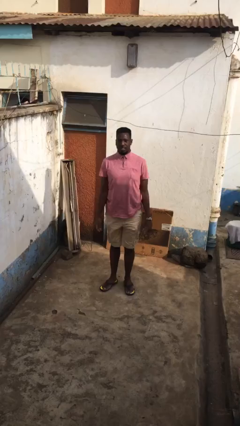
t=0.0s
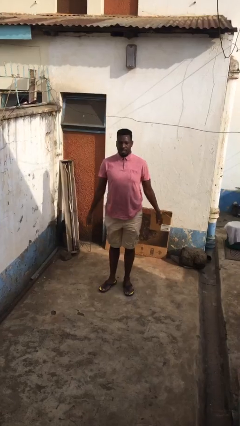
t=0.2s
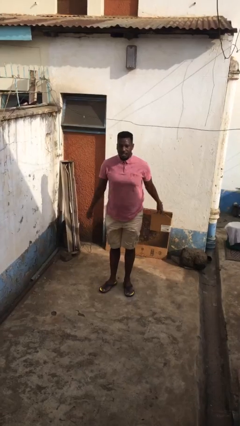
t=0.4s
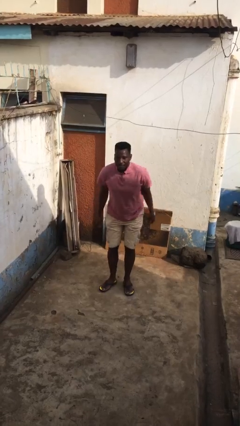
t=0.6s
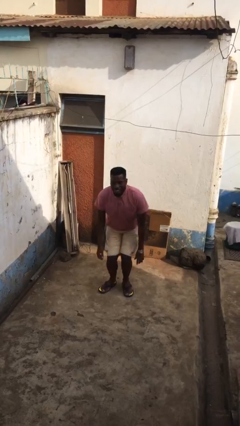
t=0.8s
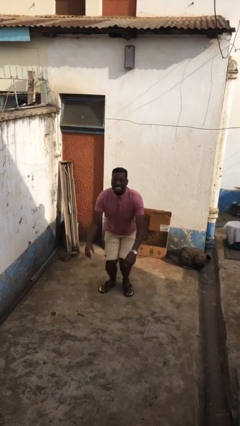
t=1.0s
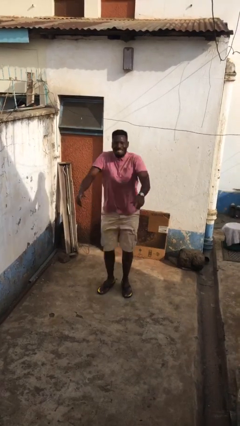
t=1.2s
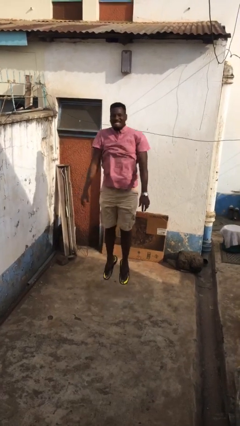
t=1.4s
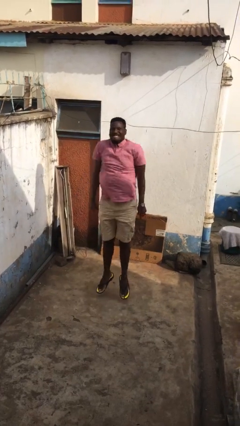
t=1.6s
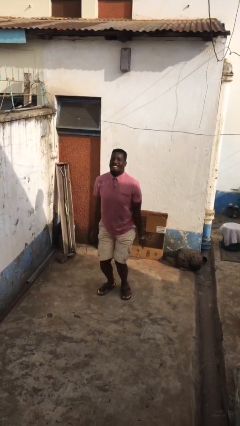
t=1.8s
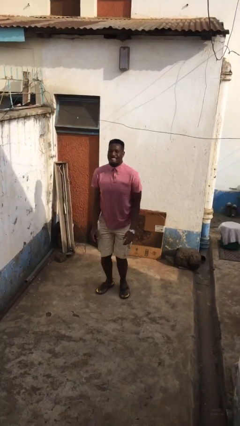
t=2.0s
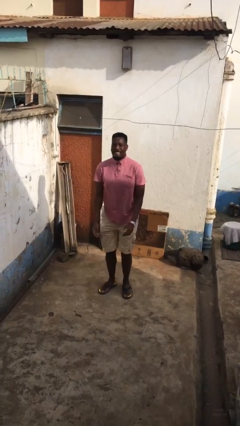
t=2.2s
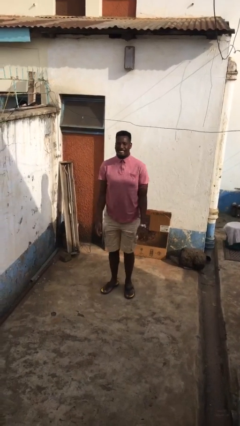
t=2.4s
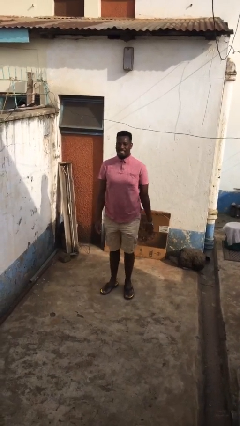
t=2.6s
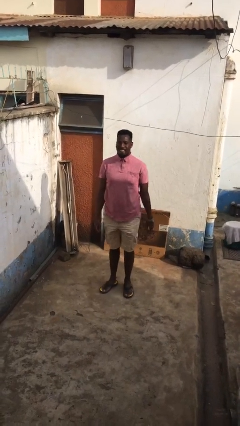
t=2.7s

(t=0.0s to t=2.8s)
person jumps

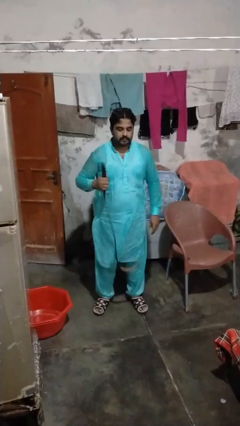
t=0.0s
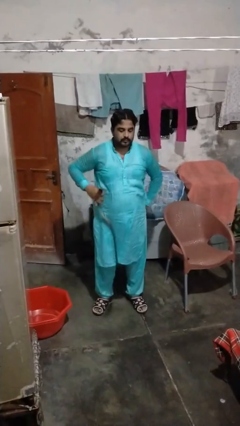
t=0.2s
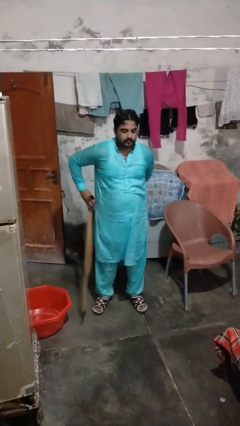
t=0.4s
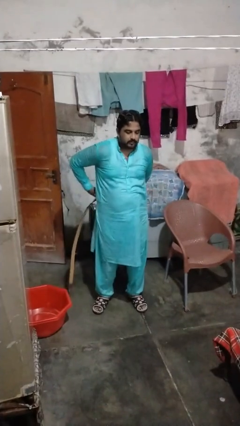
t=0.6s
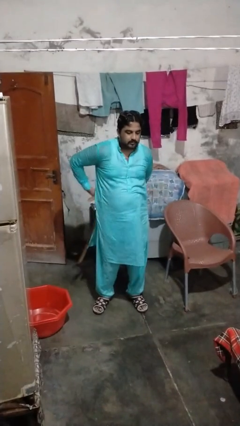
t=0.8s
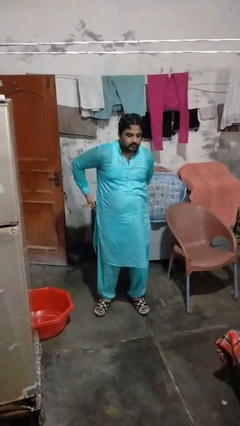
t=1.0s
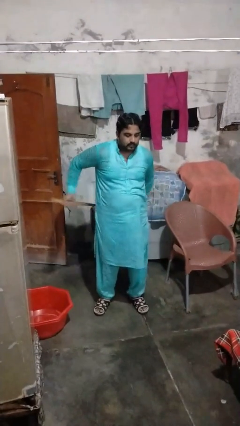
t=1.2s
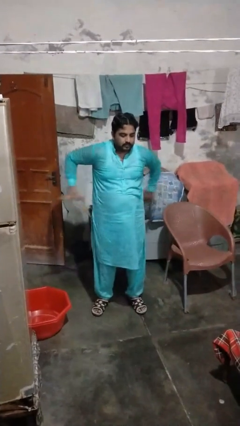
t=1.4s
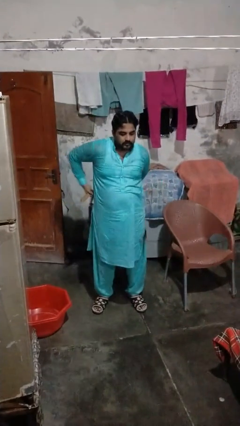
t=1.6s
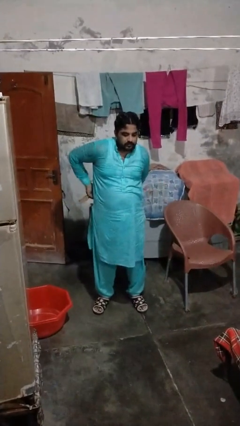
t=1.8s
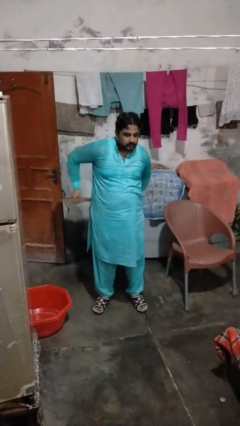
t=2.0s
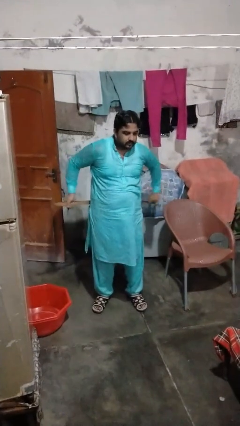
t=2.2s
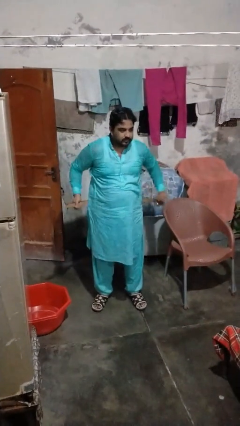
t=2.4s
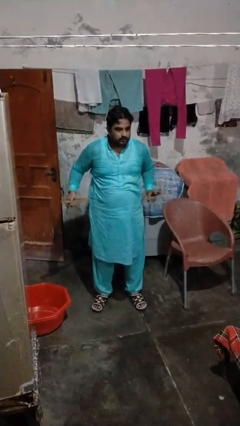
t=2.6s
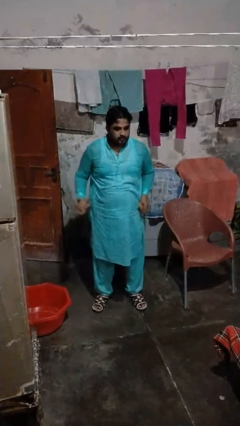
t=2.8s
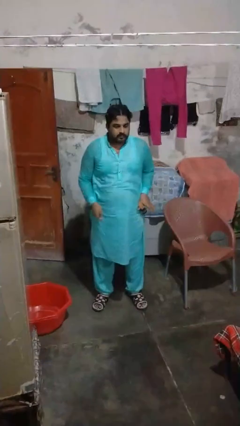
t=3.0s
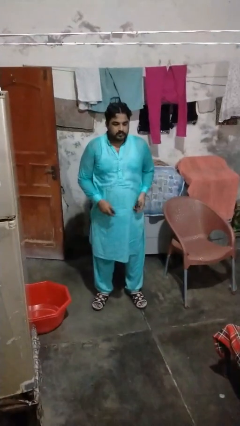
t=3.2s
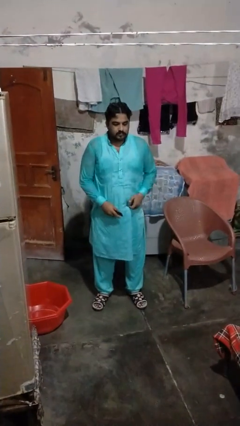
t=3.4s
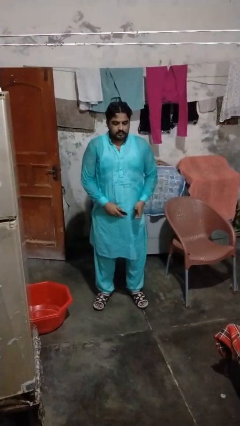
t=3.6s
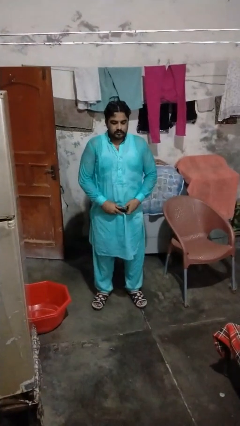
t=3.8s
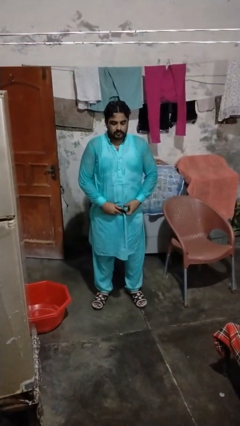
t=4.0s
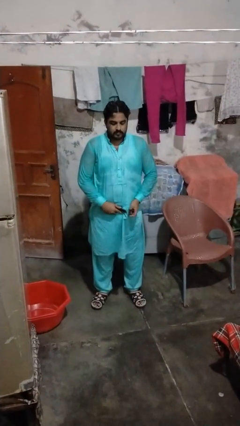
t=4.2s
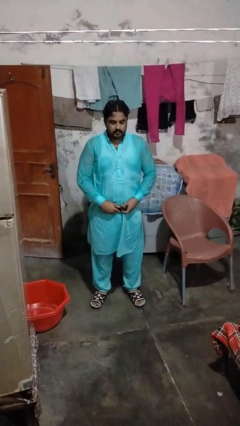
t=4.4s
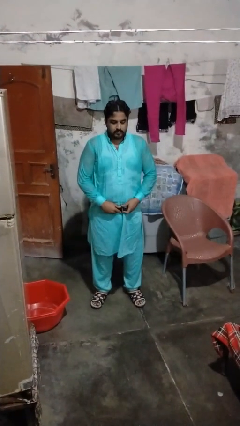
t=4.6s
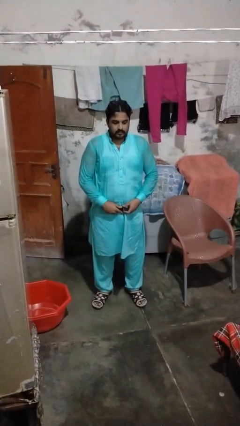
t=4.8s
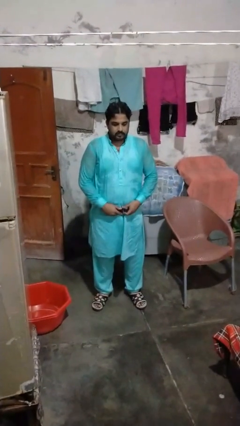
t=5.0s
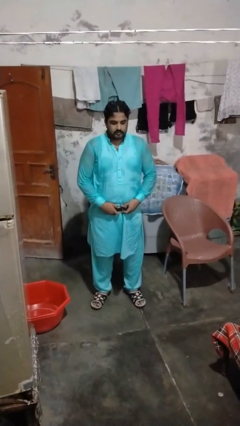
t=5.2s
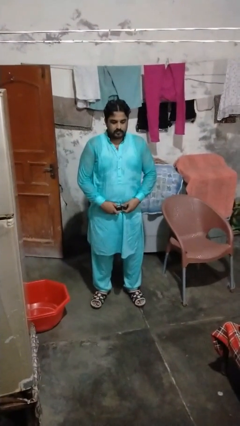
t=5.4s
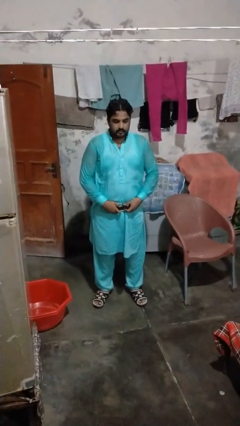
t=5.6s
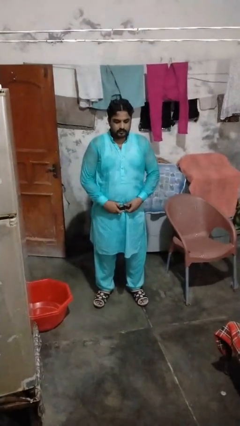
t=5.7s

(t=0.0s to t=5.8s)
person puts on belt

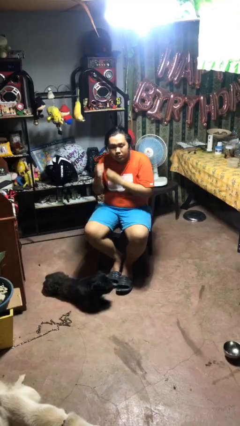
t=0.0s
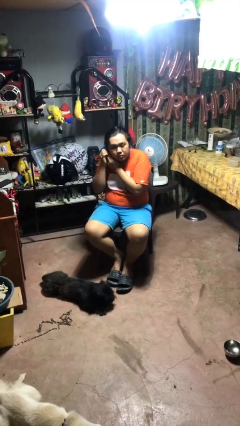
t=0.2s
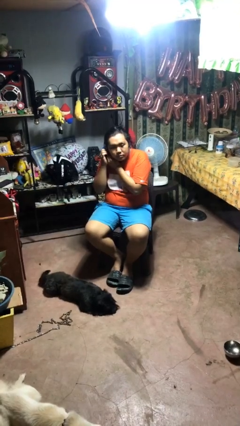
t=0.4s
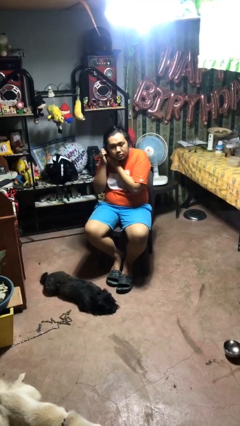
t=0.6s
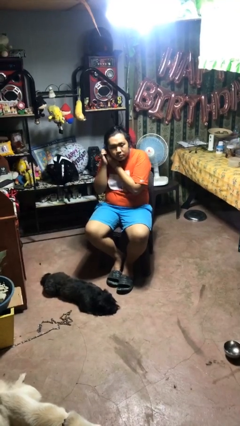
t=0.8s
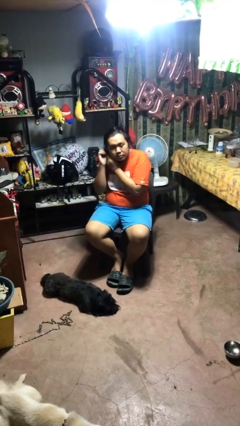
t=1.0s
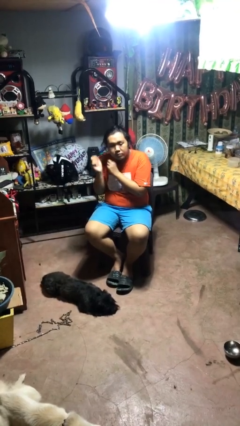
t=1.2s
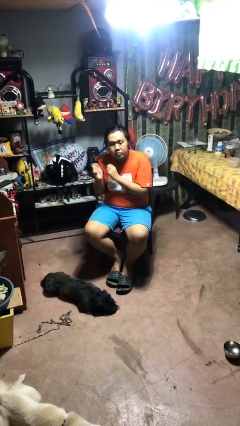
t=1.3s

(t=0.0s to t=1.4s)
person takes off earrings

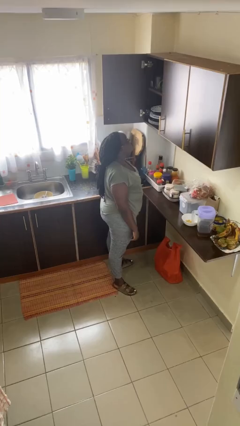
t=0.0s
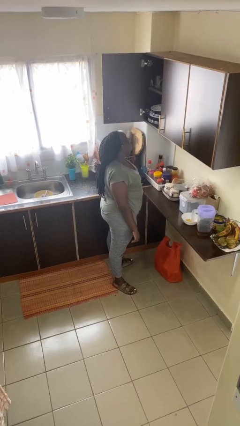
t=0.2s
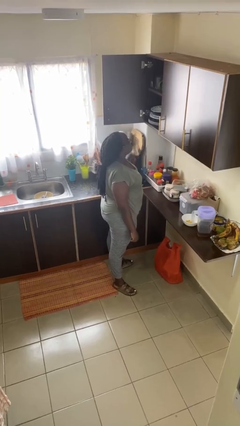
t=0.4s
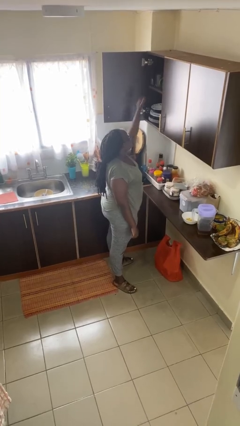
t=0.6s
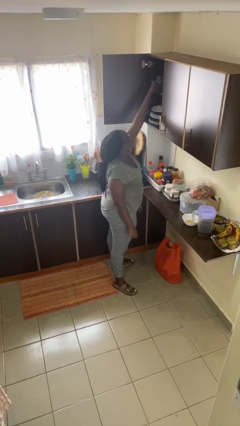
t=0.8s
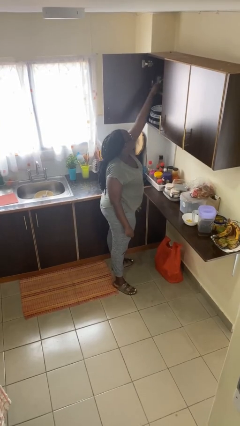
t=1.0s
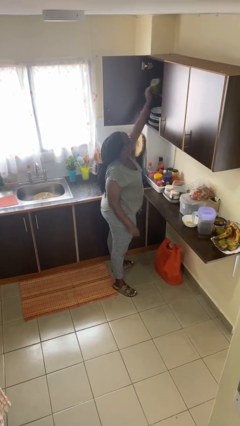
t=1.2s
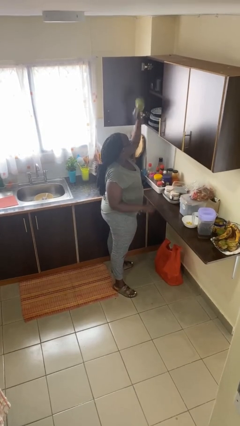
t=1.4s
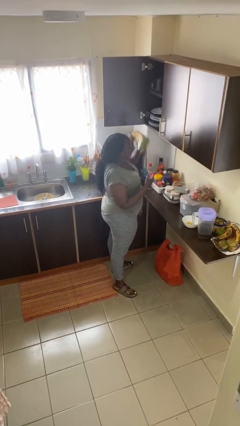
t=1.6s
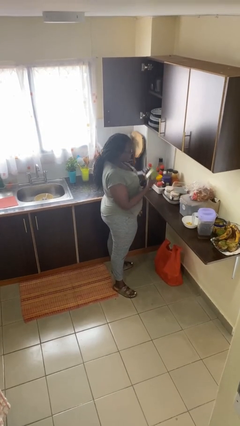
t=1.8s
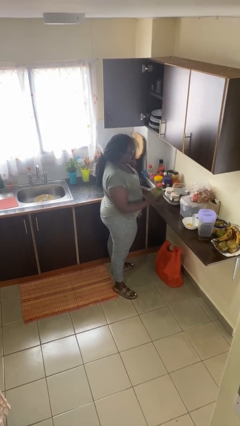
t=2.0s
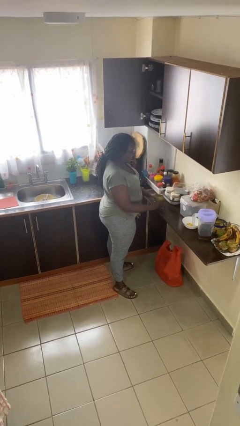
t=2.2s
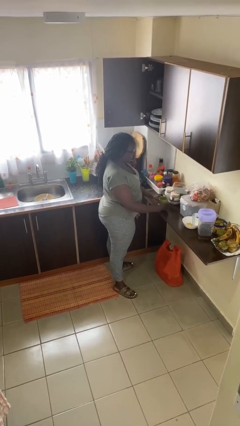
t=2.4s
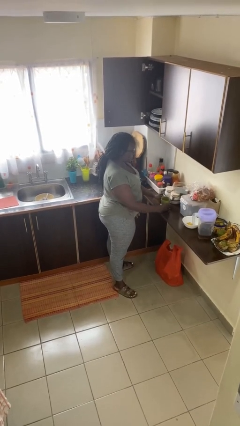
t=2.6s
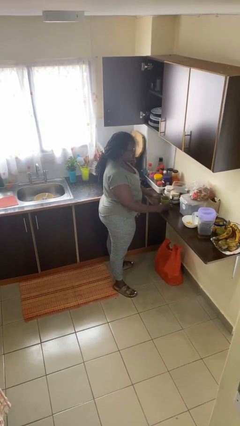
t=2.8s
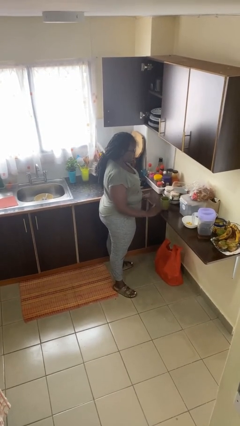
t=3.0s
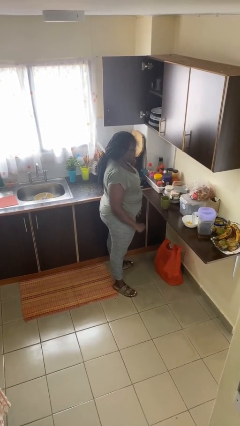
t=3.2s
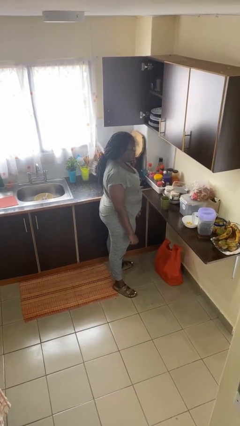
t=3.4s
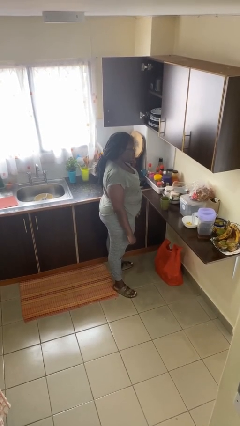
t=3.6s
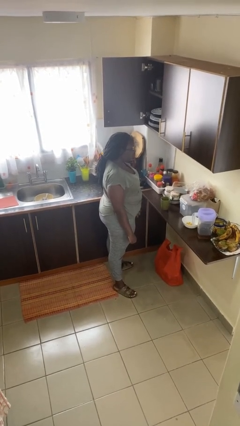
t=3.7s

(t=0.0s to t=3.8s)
person takes object from cabinet

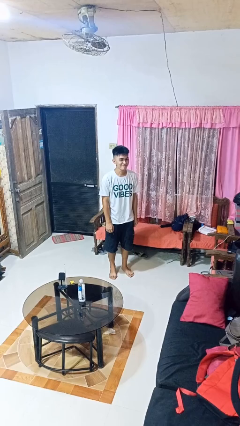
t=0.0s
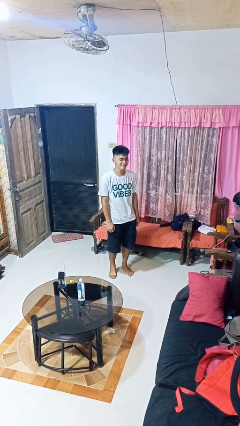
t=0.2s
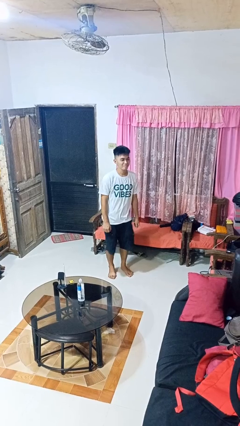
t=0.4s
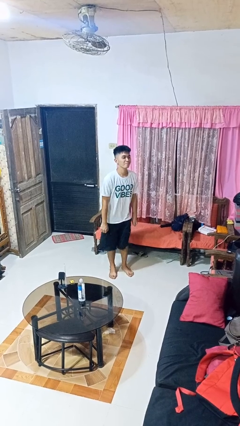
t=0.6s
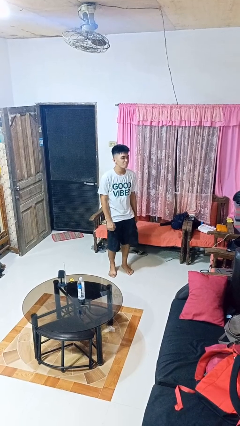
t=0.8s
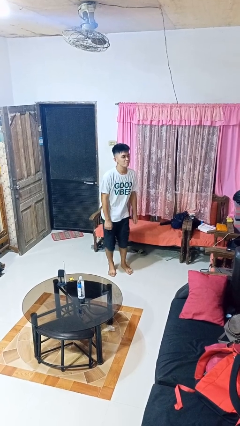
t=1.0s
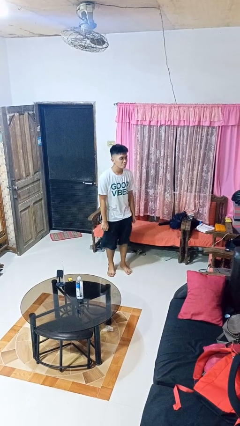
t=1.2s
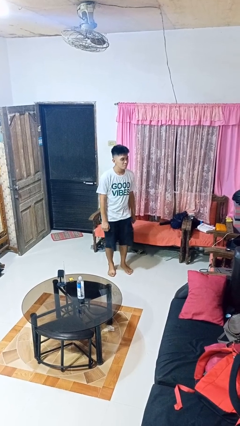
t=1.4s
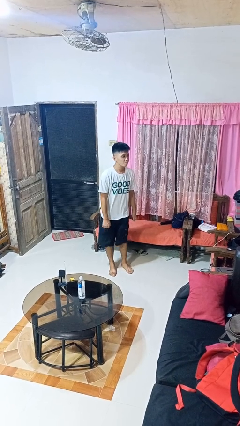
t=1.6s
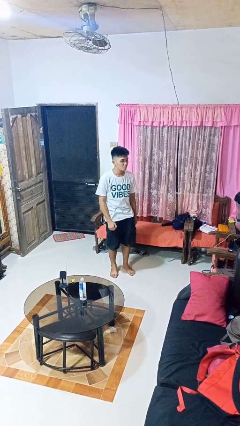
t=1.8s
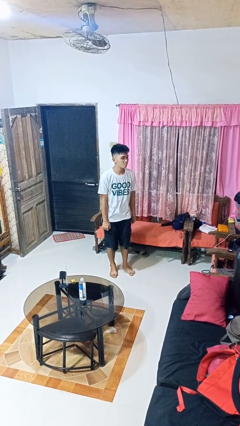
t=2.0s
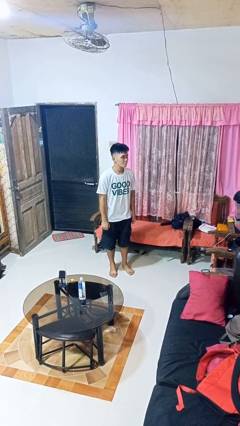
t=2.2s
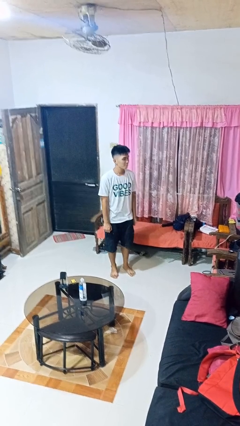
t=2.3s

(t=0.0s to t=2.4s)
person wiggles hips

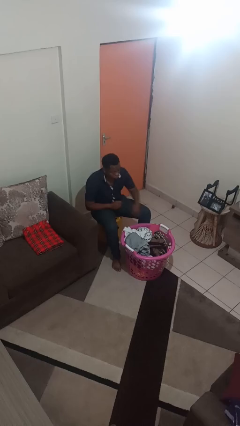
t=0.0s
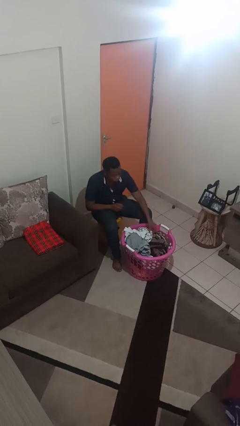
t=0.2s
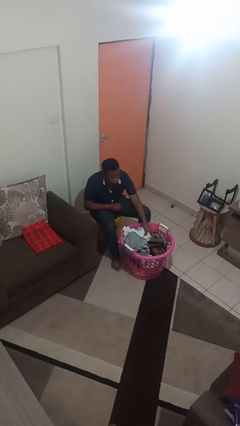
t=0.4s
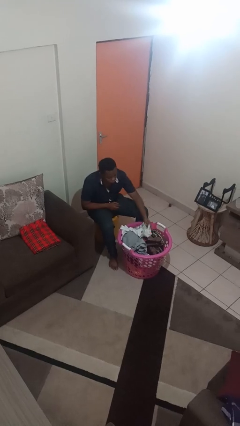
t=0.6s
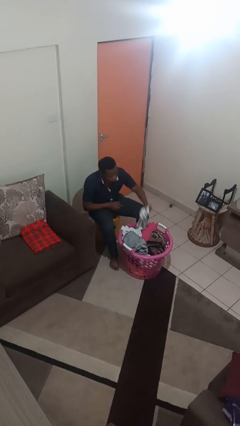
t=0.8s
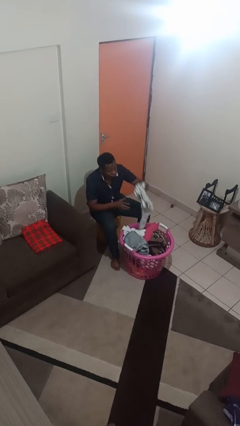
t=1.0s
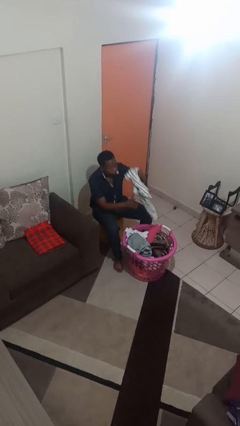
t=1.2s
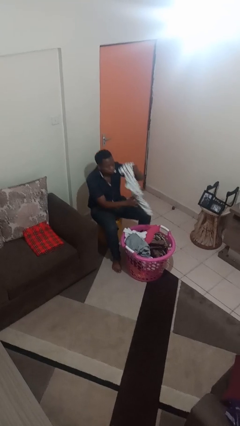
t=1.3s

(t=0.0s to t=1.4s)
person takes object from basket
